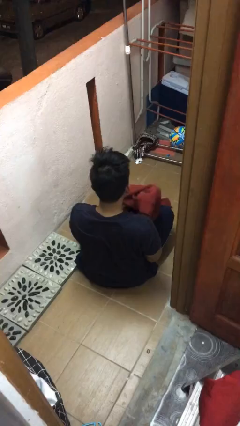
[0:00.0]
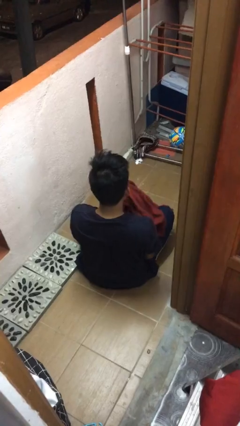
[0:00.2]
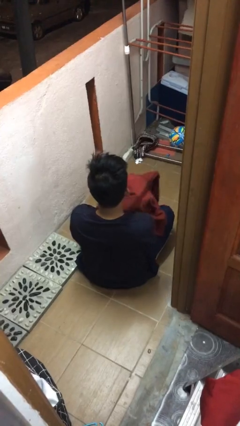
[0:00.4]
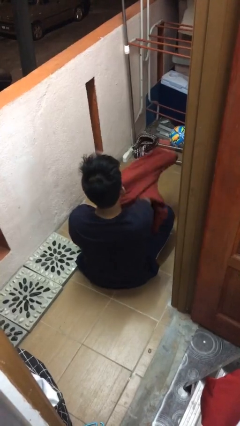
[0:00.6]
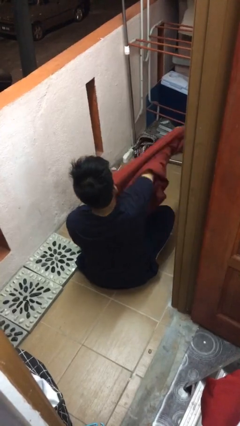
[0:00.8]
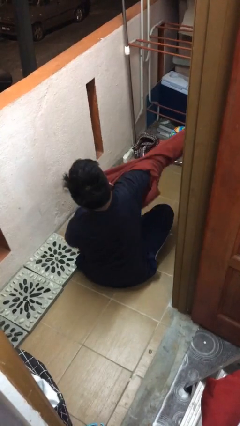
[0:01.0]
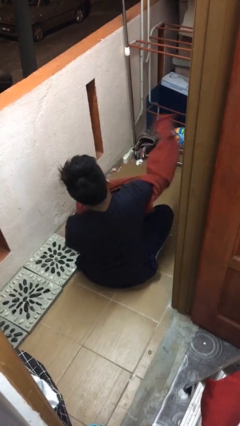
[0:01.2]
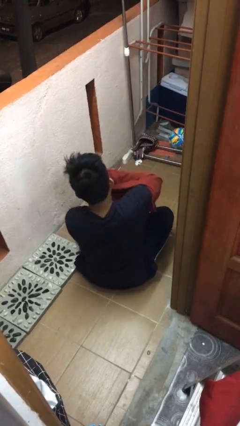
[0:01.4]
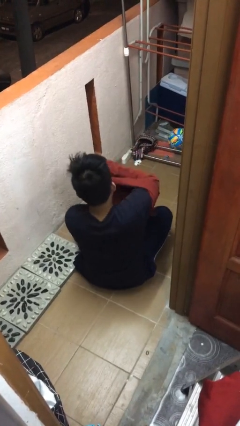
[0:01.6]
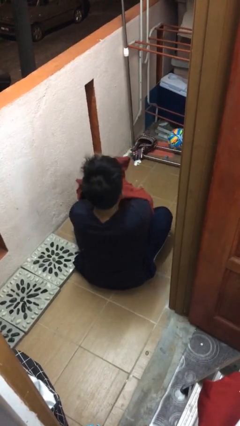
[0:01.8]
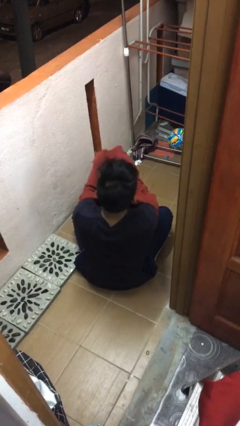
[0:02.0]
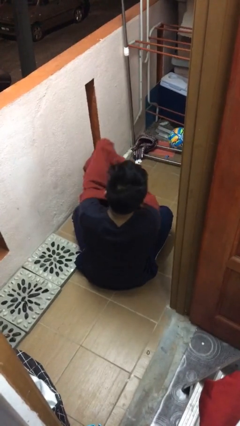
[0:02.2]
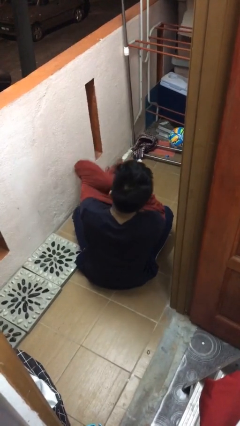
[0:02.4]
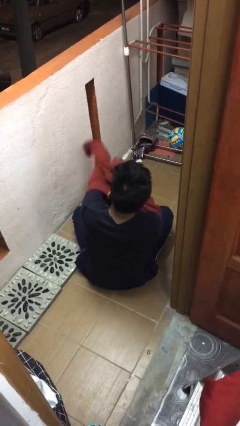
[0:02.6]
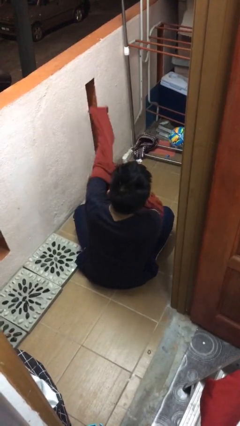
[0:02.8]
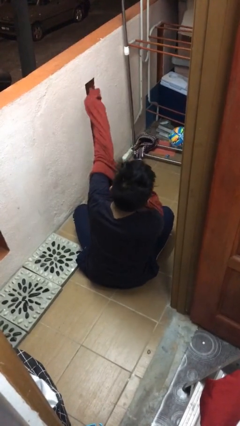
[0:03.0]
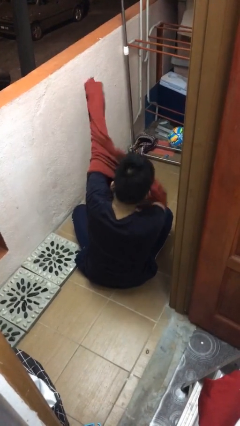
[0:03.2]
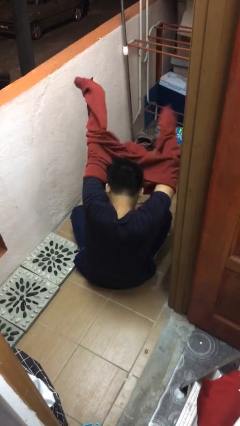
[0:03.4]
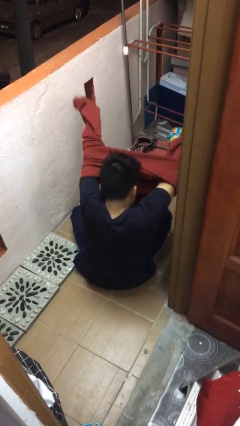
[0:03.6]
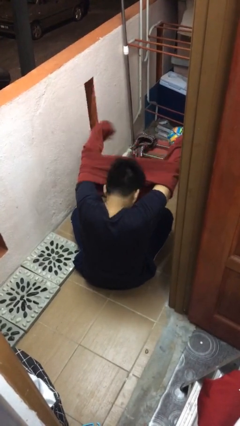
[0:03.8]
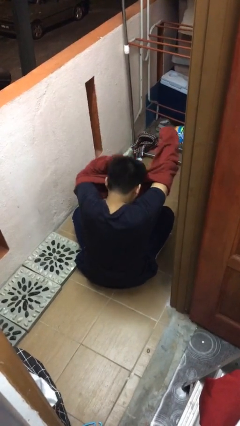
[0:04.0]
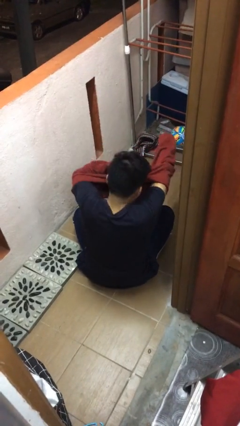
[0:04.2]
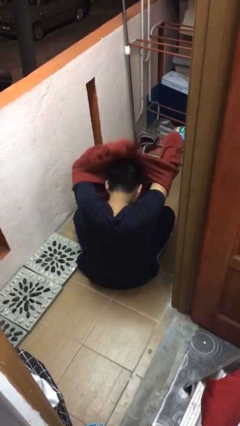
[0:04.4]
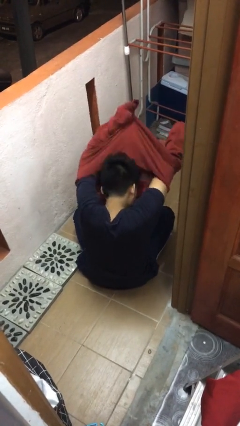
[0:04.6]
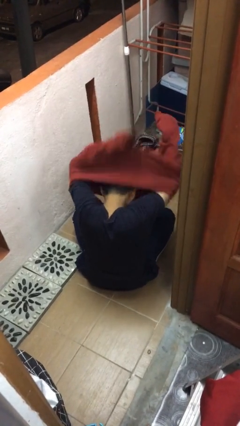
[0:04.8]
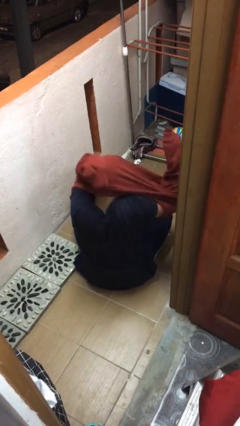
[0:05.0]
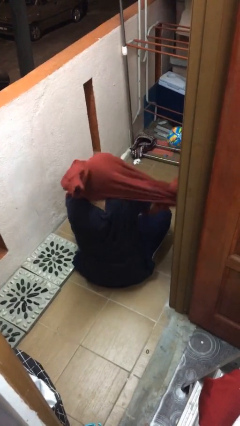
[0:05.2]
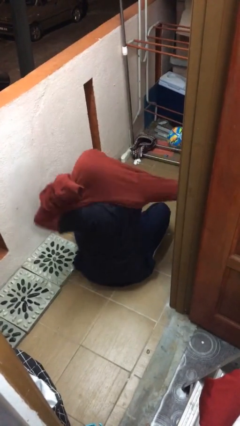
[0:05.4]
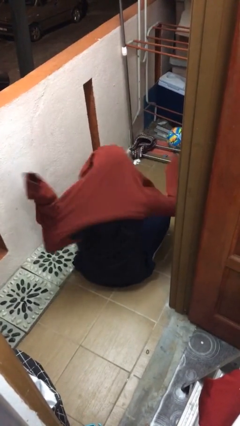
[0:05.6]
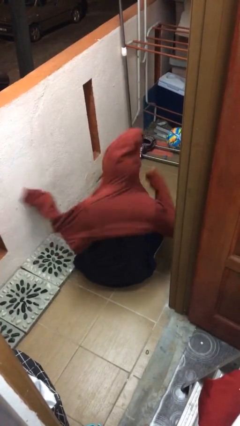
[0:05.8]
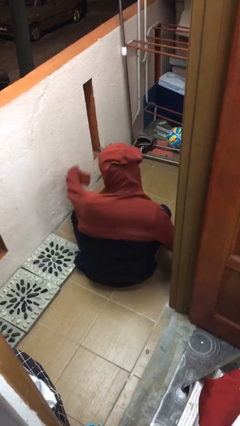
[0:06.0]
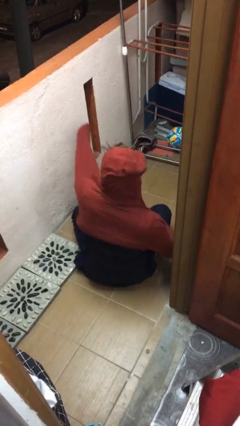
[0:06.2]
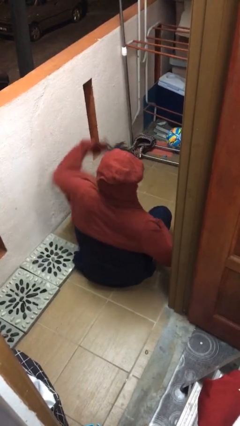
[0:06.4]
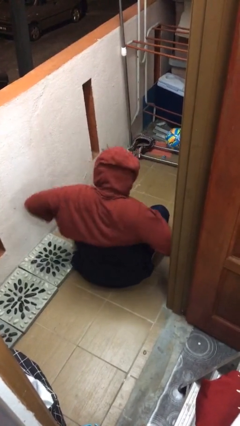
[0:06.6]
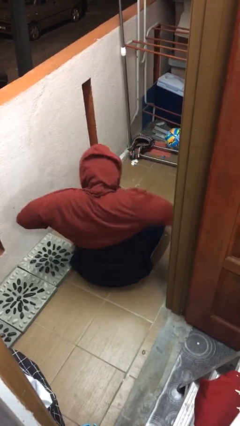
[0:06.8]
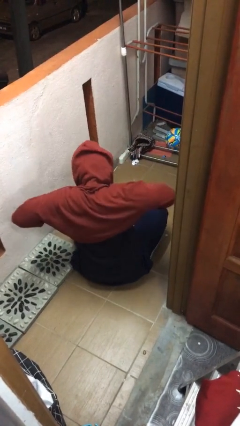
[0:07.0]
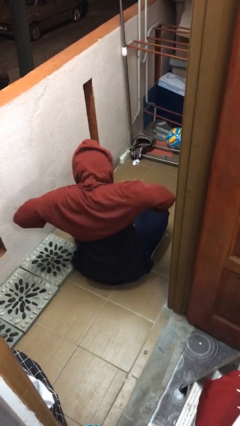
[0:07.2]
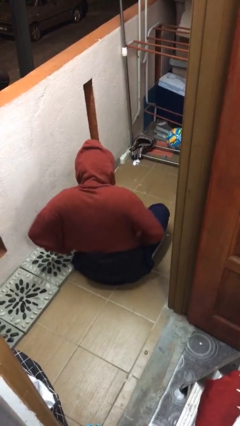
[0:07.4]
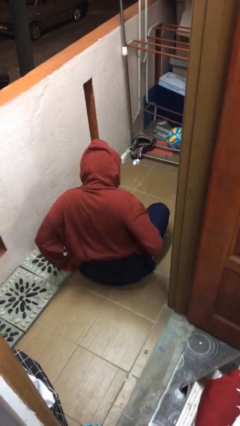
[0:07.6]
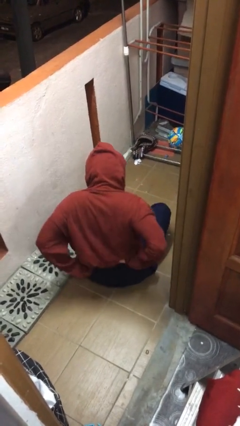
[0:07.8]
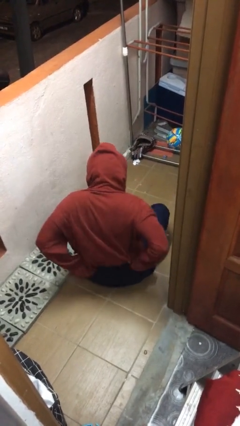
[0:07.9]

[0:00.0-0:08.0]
person puts on hoodie

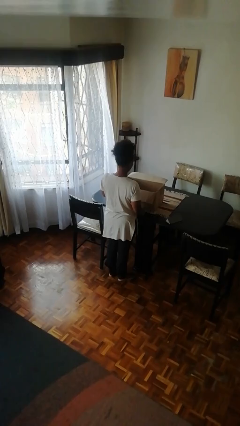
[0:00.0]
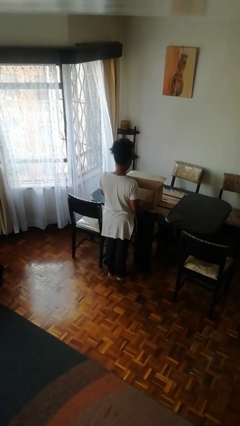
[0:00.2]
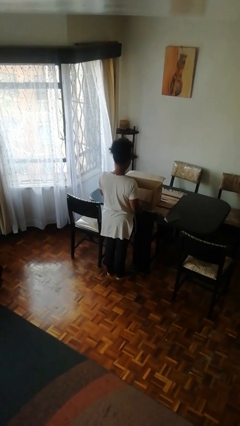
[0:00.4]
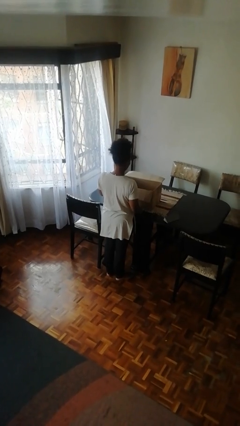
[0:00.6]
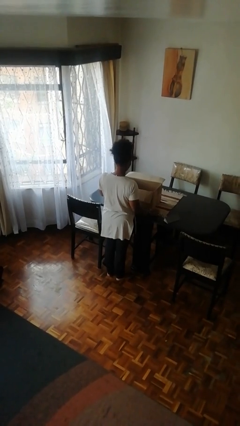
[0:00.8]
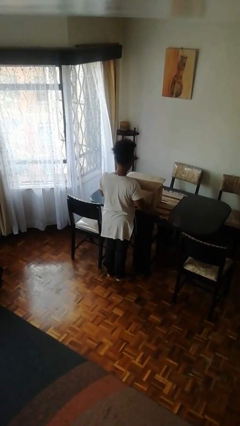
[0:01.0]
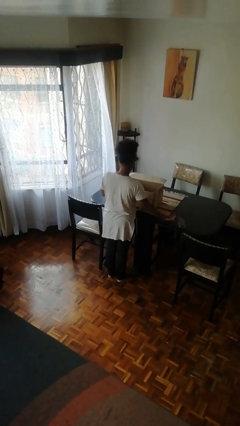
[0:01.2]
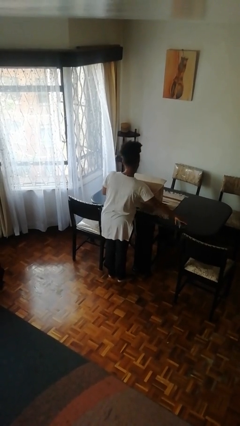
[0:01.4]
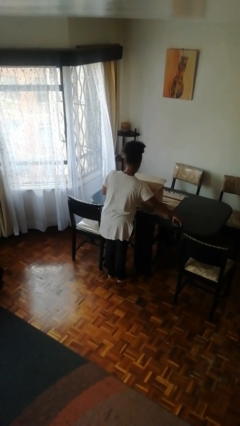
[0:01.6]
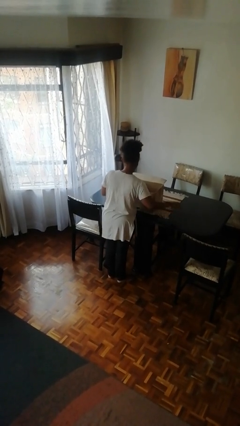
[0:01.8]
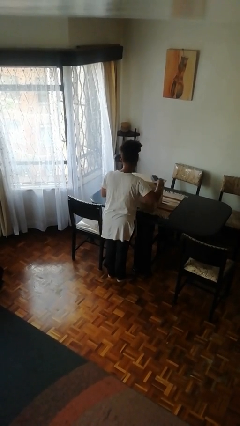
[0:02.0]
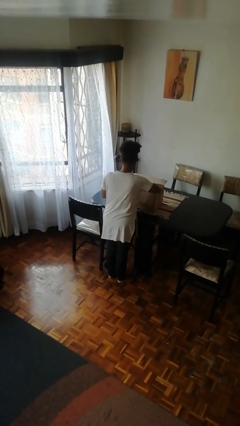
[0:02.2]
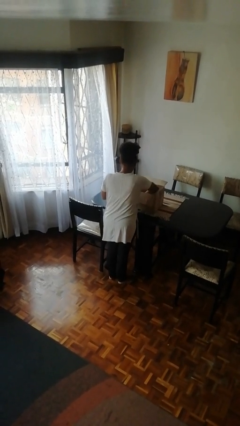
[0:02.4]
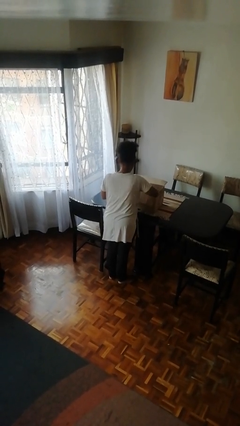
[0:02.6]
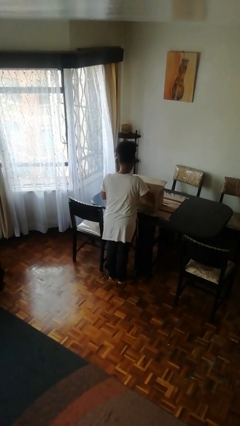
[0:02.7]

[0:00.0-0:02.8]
person puts object into box

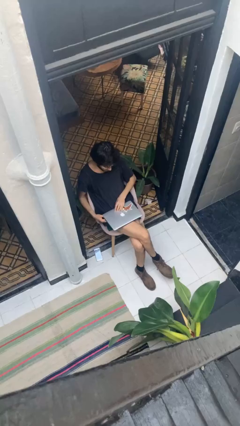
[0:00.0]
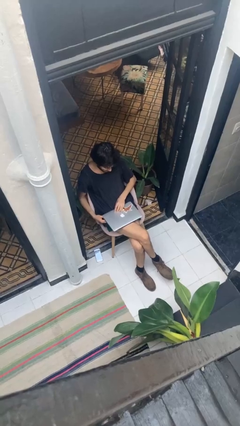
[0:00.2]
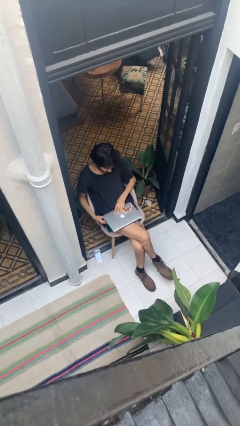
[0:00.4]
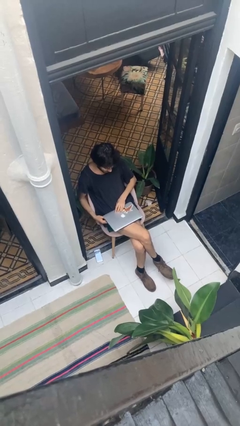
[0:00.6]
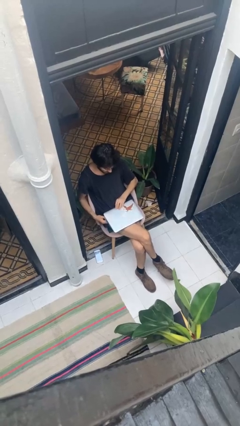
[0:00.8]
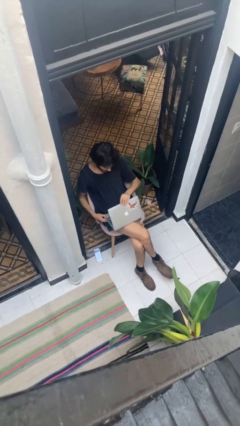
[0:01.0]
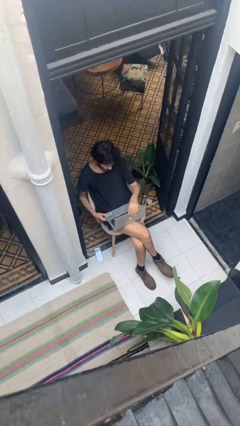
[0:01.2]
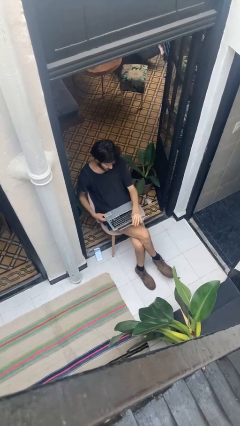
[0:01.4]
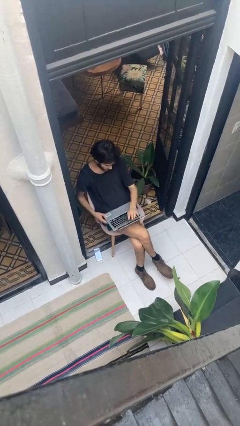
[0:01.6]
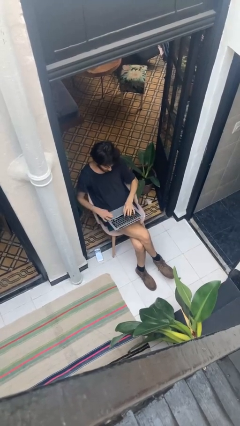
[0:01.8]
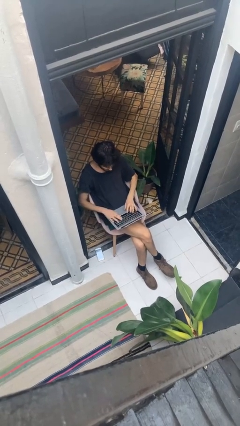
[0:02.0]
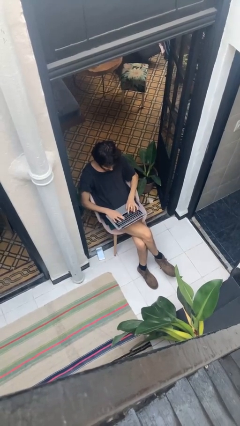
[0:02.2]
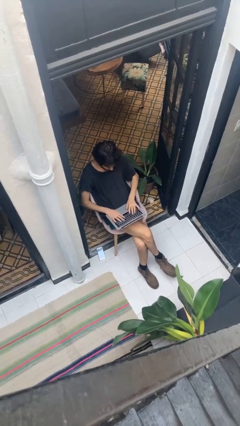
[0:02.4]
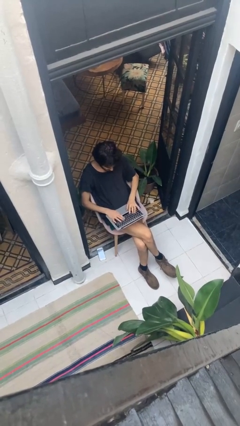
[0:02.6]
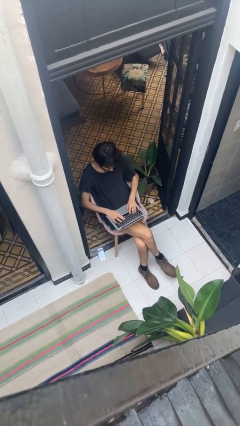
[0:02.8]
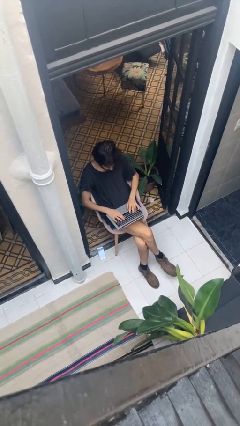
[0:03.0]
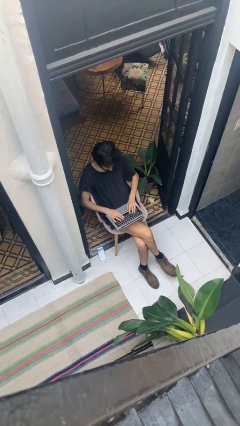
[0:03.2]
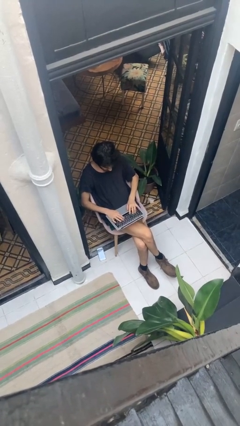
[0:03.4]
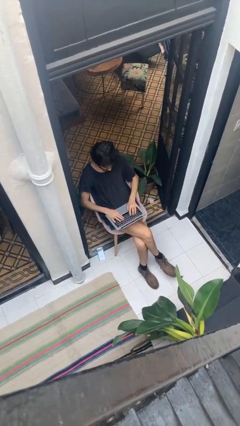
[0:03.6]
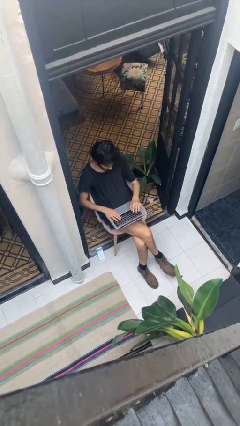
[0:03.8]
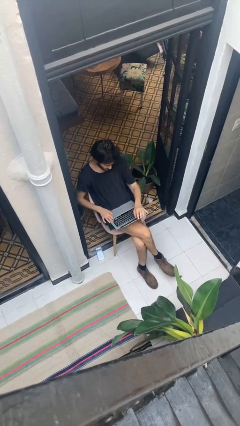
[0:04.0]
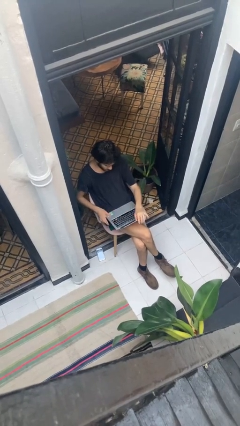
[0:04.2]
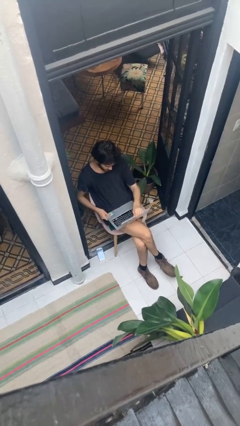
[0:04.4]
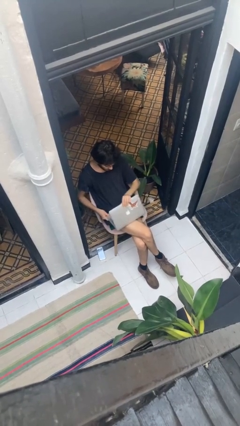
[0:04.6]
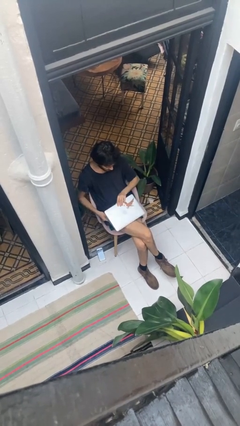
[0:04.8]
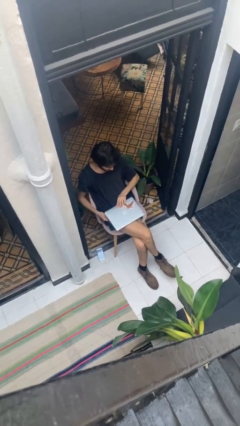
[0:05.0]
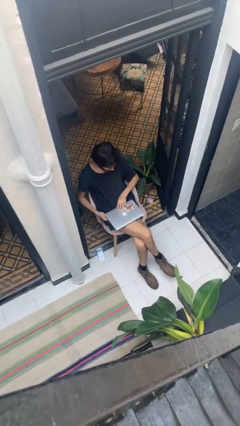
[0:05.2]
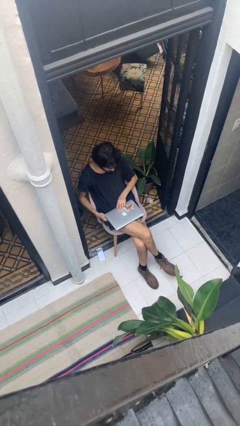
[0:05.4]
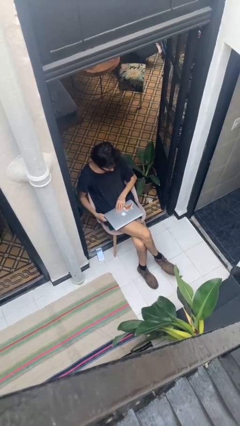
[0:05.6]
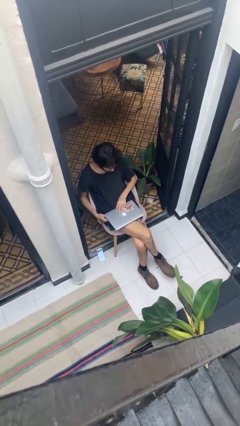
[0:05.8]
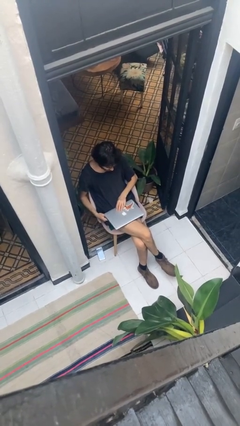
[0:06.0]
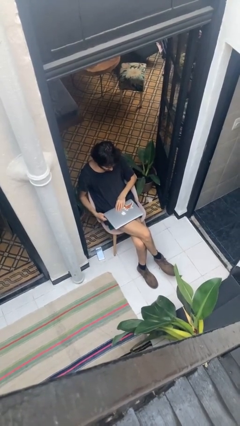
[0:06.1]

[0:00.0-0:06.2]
person interacts with laptop

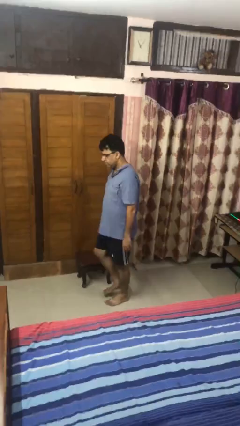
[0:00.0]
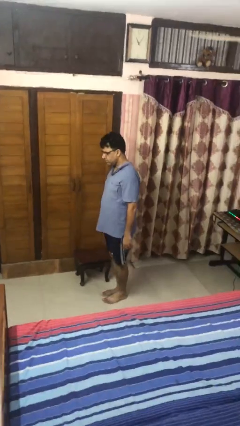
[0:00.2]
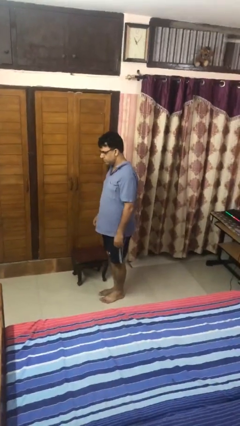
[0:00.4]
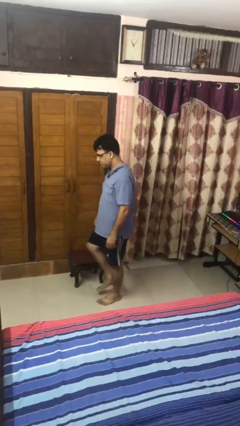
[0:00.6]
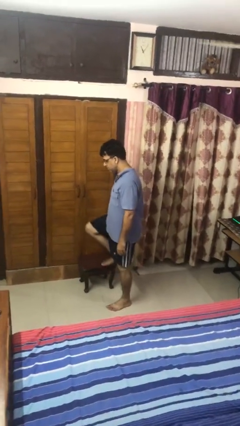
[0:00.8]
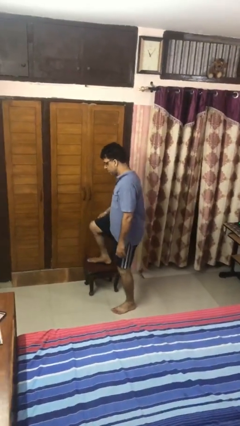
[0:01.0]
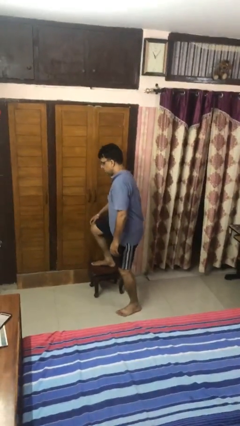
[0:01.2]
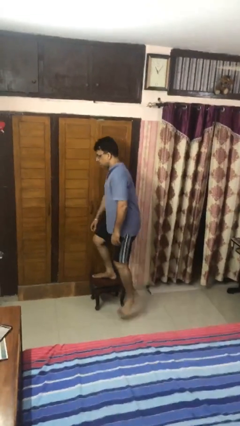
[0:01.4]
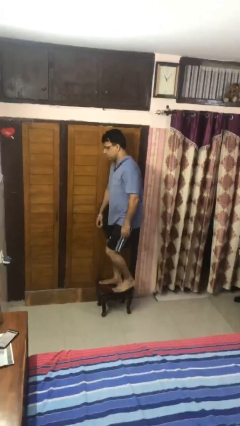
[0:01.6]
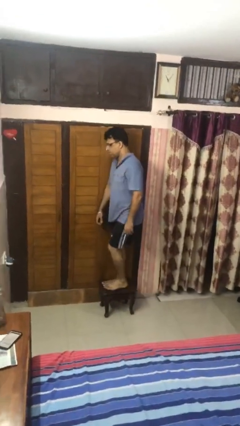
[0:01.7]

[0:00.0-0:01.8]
person climbs on table
